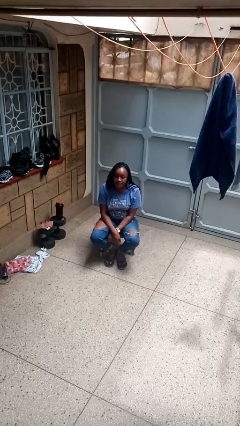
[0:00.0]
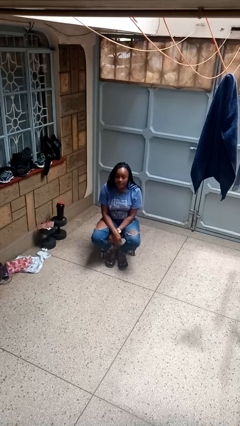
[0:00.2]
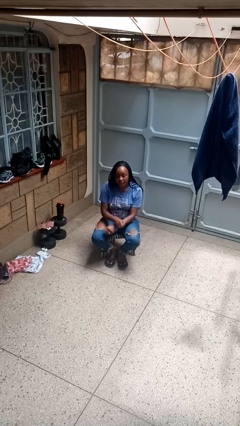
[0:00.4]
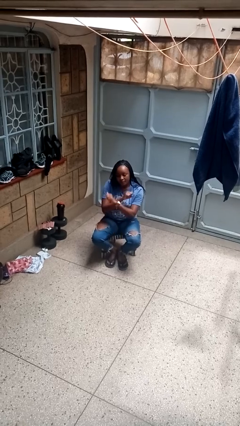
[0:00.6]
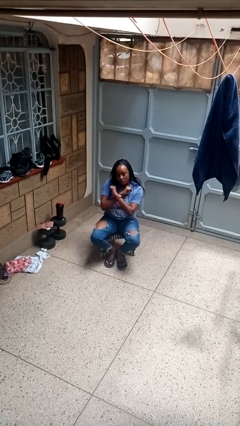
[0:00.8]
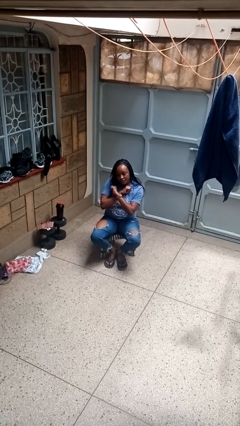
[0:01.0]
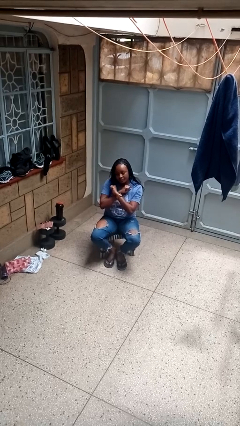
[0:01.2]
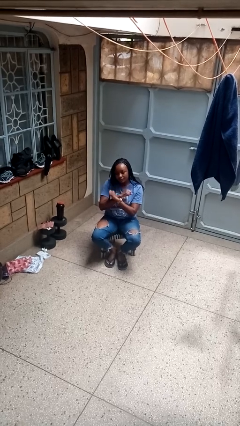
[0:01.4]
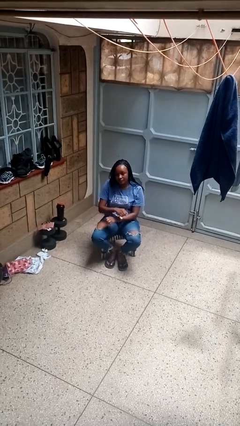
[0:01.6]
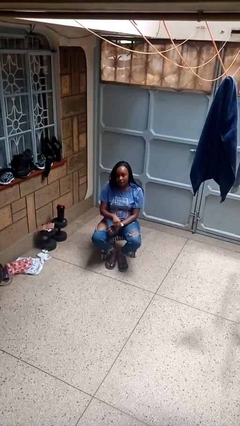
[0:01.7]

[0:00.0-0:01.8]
person gestures arms x

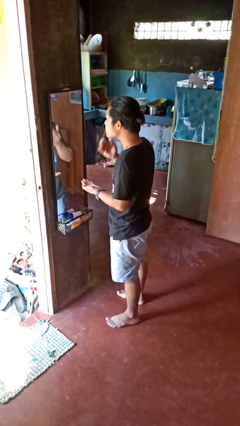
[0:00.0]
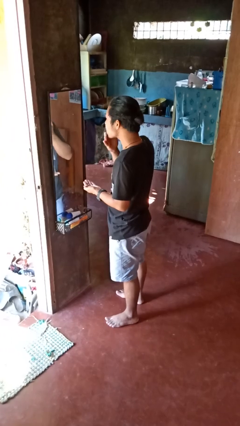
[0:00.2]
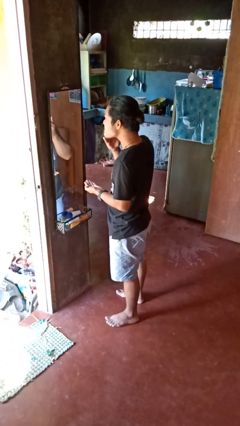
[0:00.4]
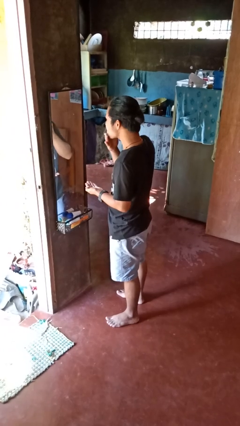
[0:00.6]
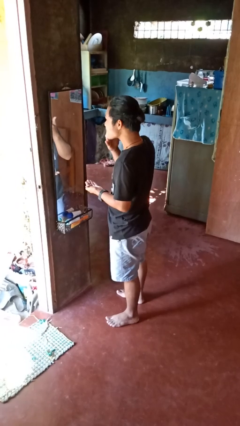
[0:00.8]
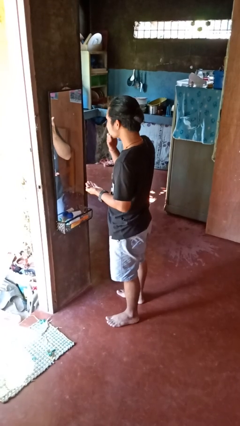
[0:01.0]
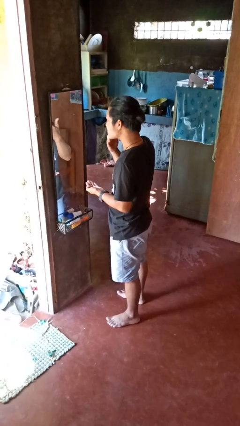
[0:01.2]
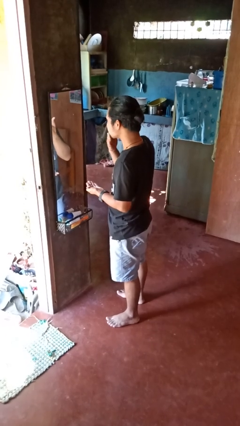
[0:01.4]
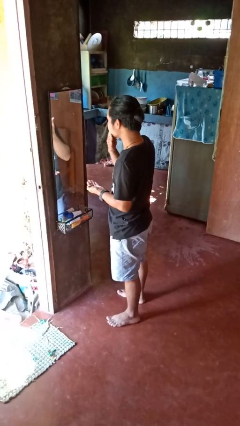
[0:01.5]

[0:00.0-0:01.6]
person applies foundation makeup

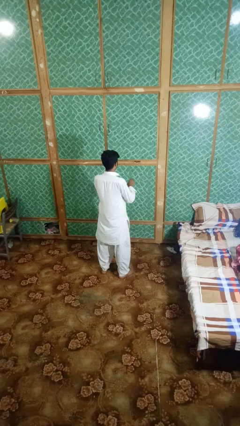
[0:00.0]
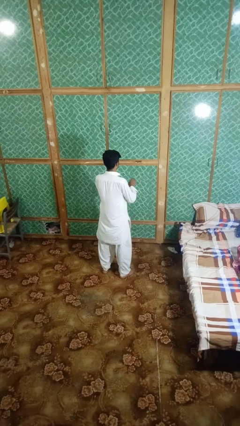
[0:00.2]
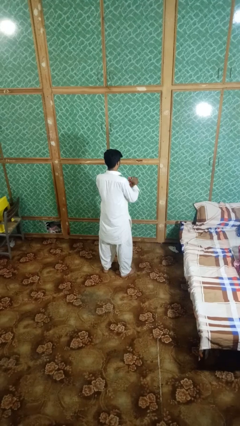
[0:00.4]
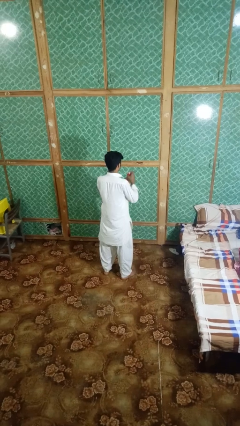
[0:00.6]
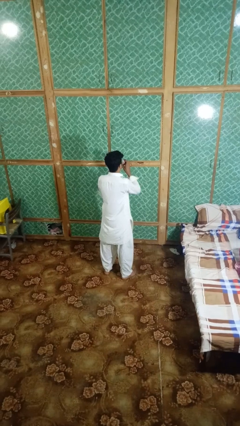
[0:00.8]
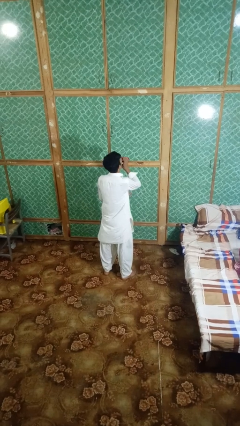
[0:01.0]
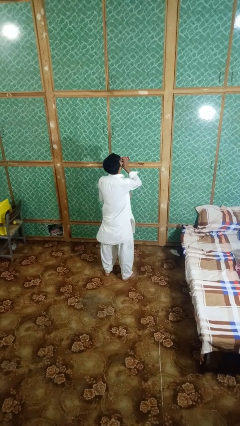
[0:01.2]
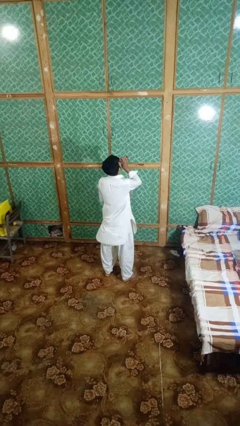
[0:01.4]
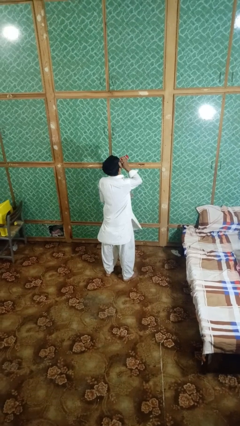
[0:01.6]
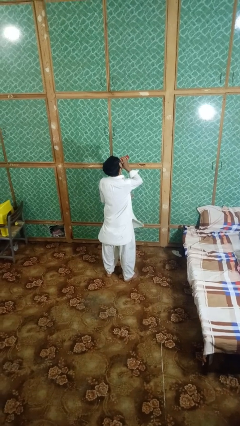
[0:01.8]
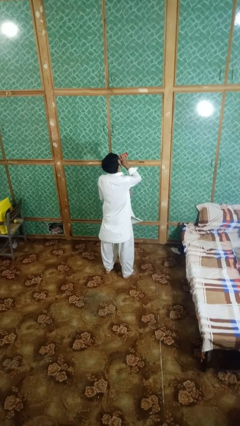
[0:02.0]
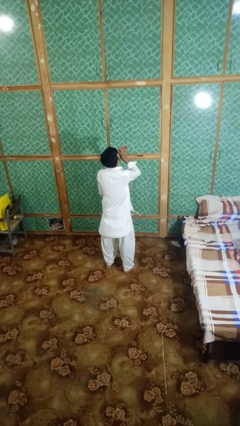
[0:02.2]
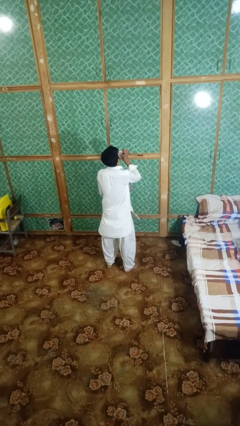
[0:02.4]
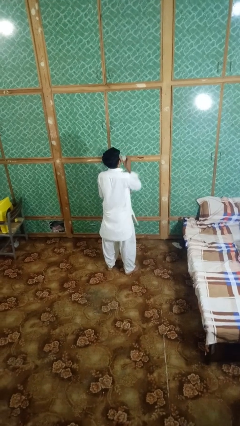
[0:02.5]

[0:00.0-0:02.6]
person drinks from beverage can

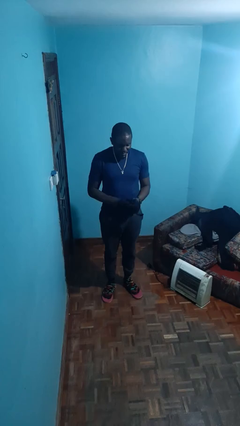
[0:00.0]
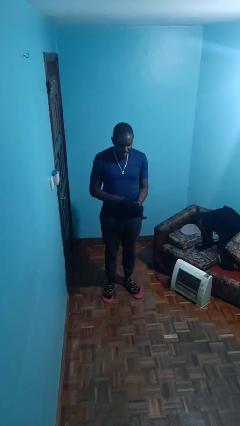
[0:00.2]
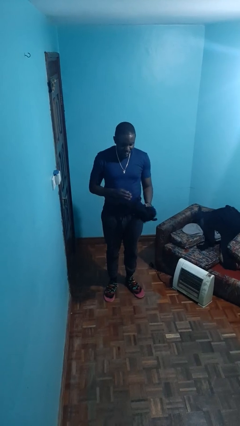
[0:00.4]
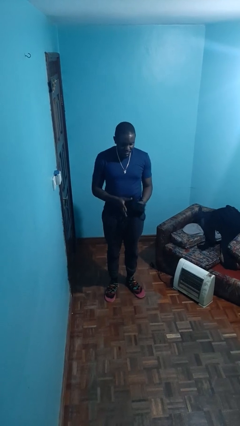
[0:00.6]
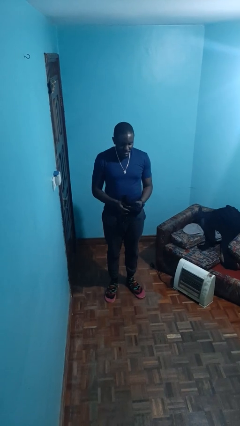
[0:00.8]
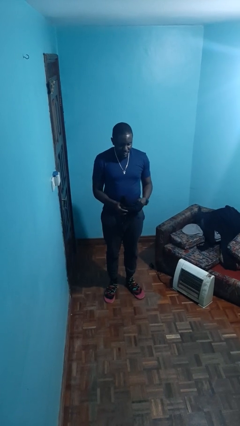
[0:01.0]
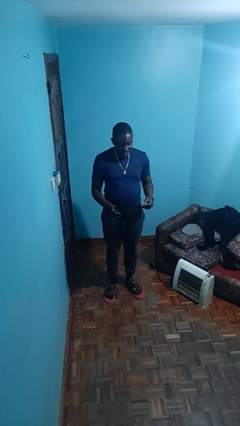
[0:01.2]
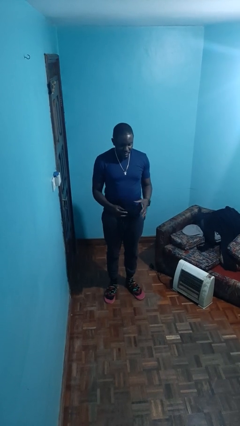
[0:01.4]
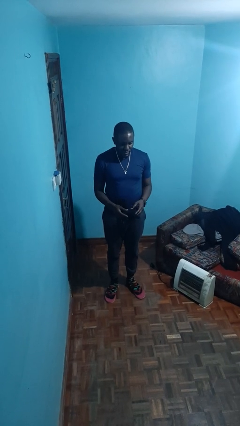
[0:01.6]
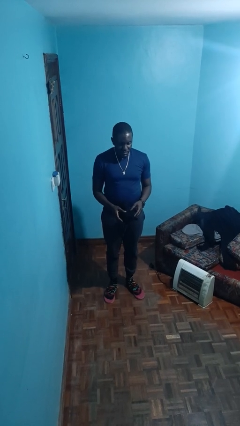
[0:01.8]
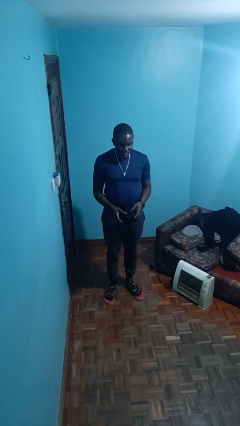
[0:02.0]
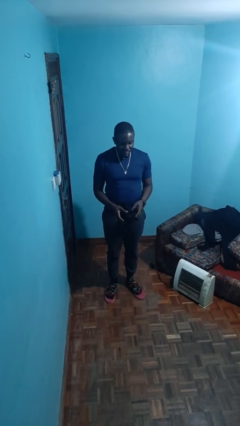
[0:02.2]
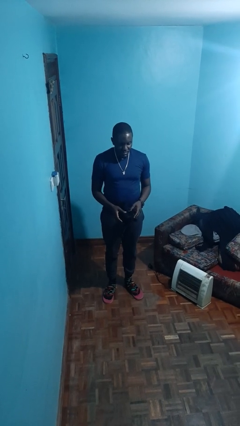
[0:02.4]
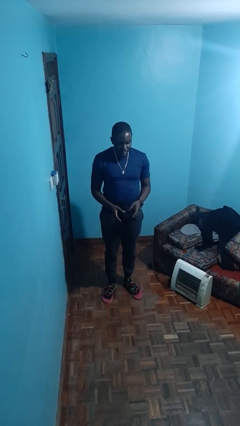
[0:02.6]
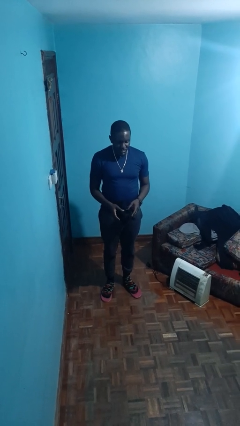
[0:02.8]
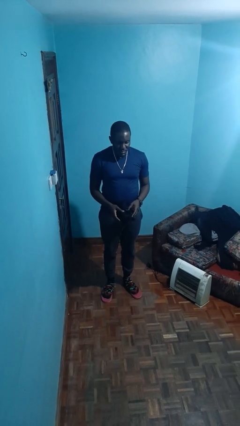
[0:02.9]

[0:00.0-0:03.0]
person takes off gloves

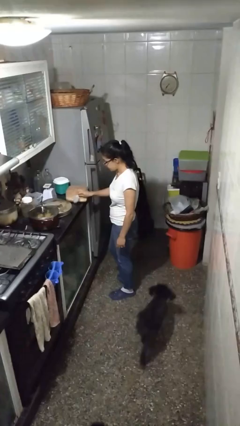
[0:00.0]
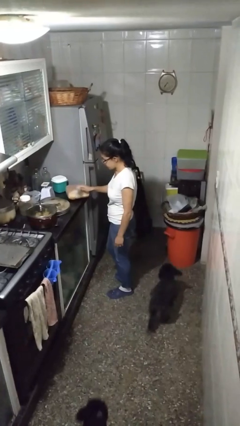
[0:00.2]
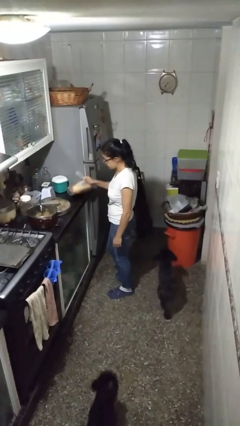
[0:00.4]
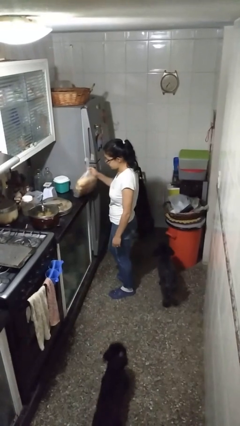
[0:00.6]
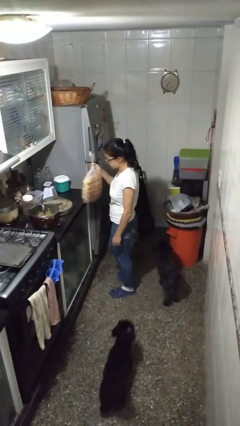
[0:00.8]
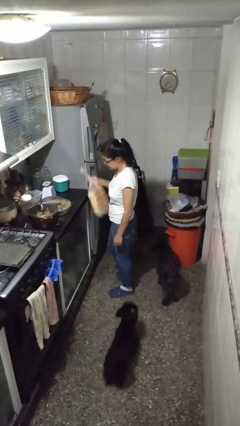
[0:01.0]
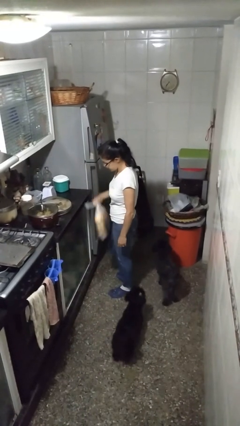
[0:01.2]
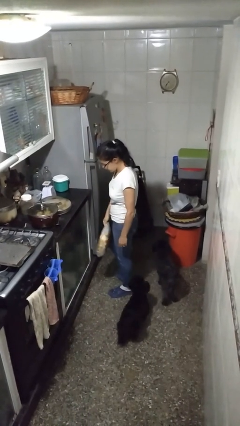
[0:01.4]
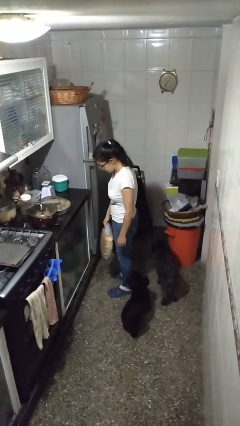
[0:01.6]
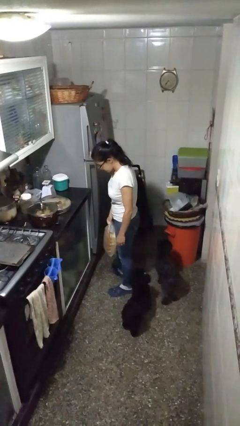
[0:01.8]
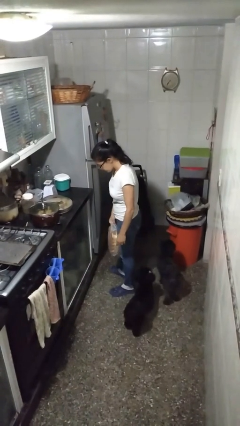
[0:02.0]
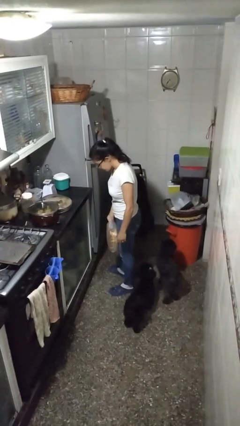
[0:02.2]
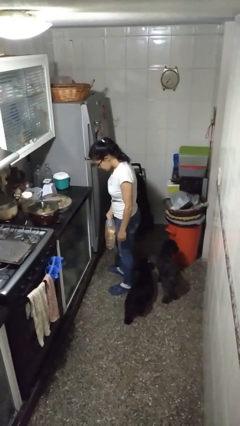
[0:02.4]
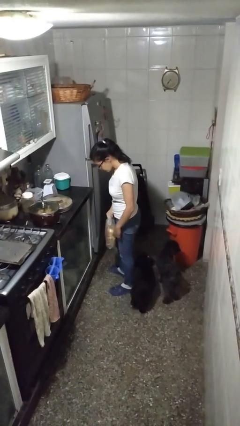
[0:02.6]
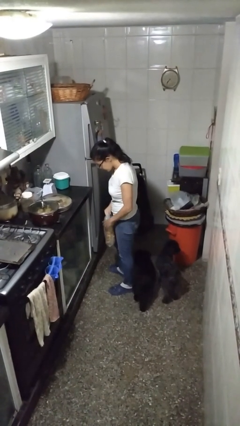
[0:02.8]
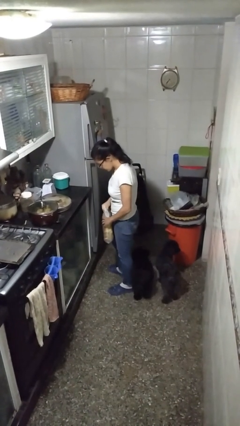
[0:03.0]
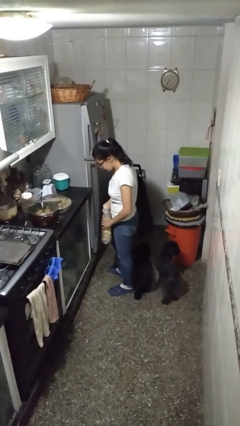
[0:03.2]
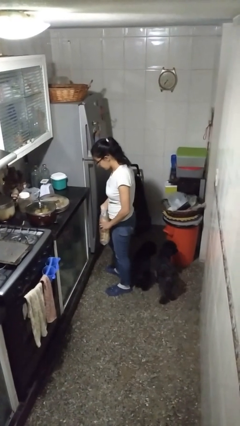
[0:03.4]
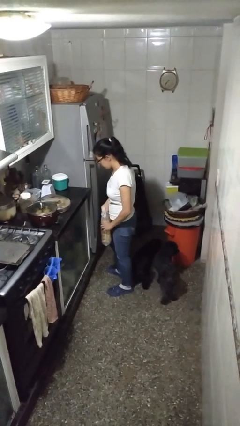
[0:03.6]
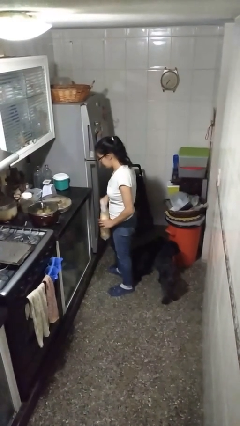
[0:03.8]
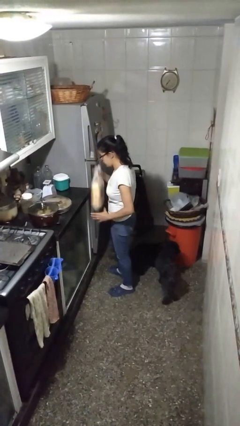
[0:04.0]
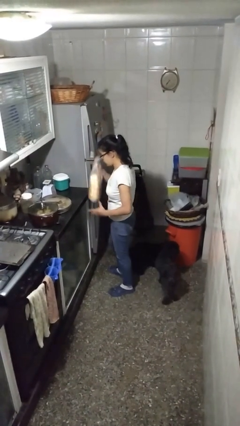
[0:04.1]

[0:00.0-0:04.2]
person picks up object from countertop

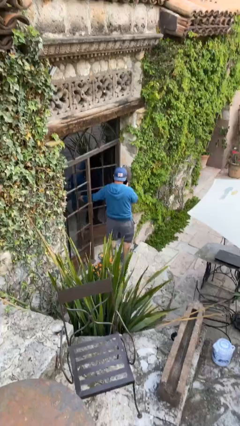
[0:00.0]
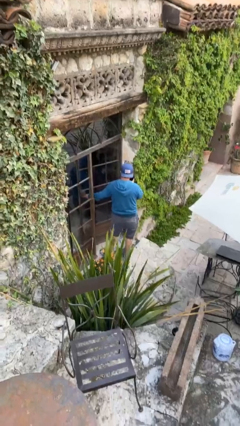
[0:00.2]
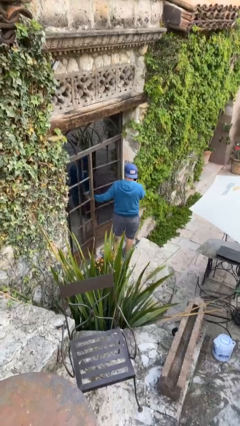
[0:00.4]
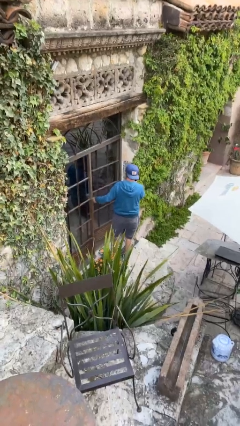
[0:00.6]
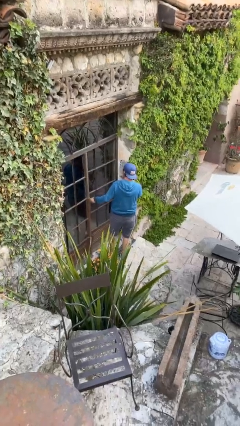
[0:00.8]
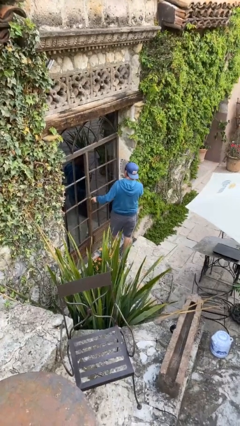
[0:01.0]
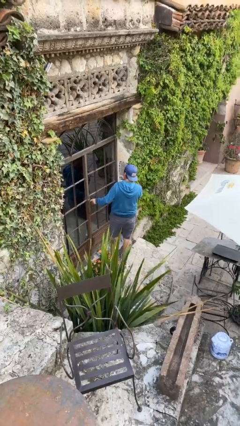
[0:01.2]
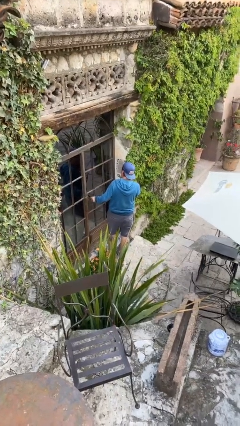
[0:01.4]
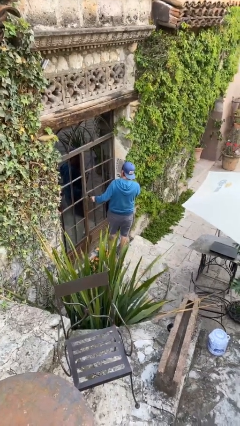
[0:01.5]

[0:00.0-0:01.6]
person closes facility door

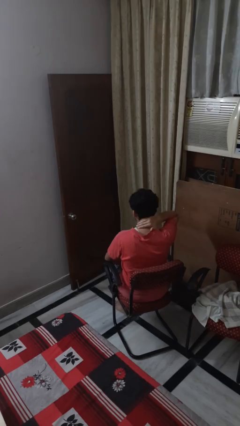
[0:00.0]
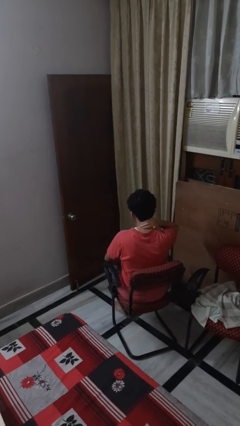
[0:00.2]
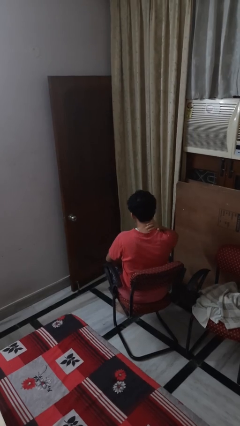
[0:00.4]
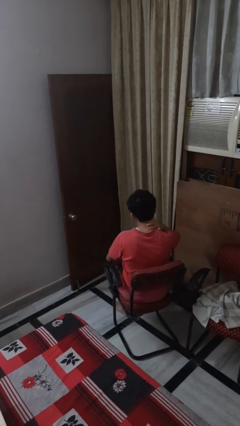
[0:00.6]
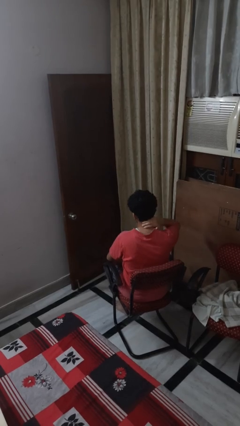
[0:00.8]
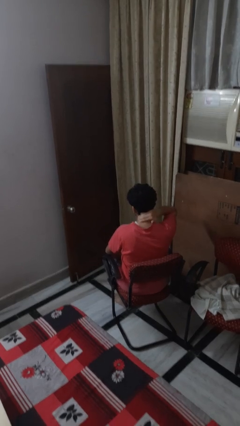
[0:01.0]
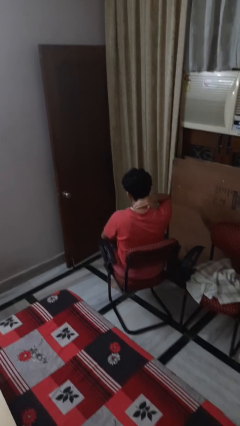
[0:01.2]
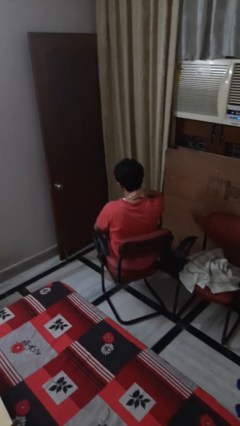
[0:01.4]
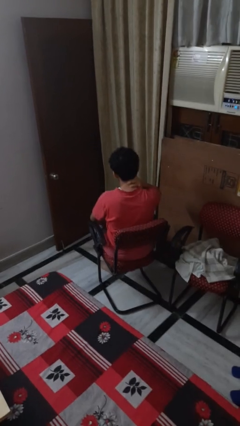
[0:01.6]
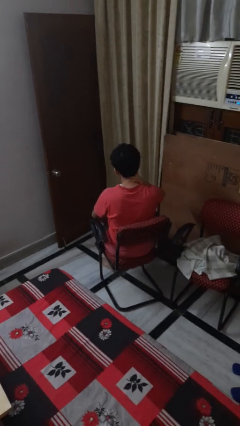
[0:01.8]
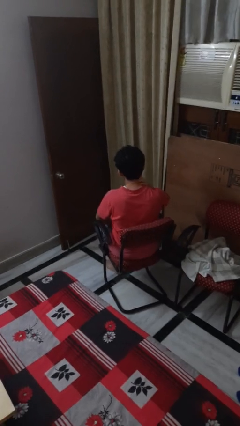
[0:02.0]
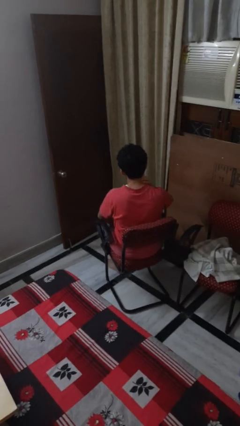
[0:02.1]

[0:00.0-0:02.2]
person rubs neck
